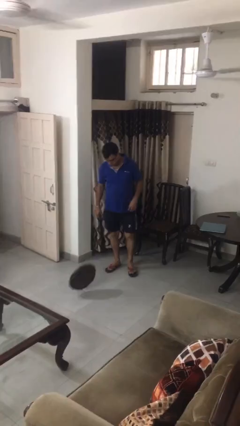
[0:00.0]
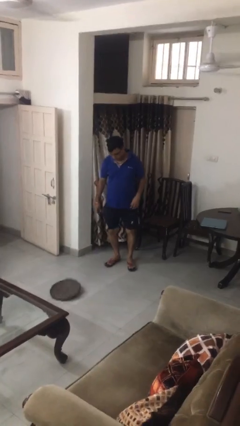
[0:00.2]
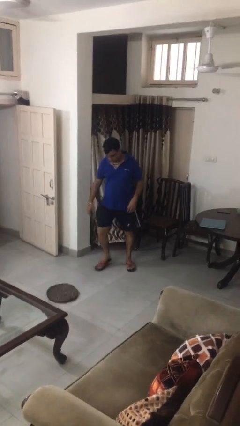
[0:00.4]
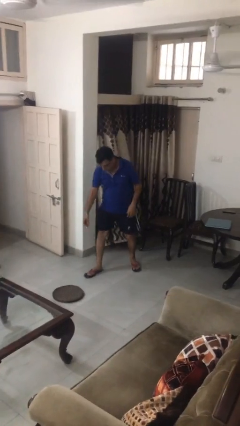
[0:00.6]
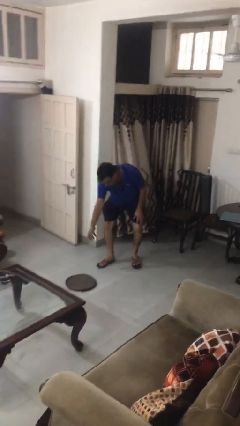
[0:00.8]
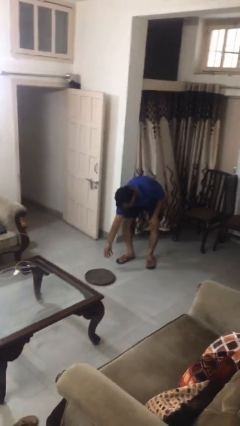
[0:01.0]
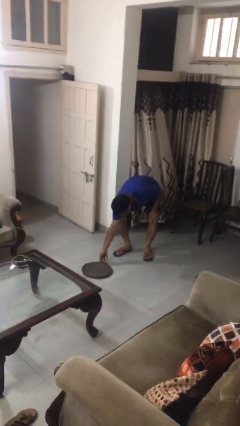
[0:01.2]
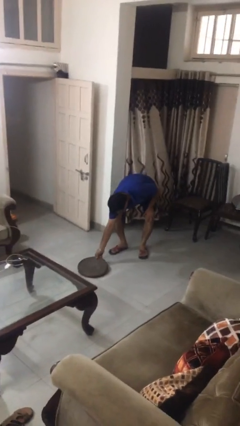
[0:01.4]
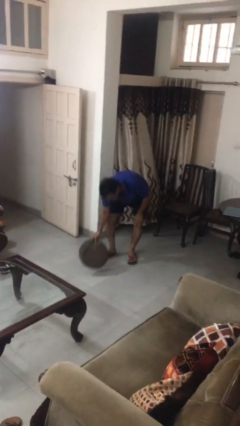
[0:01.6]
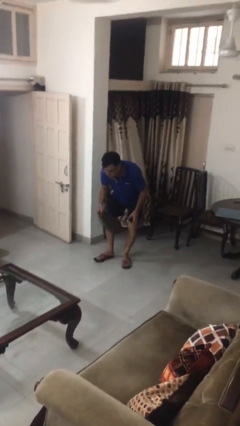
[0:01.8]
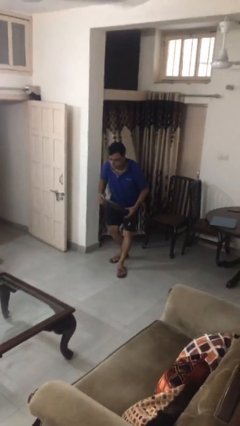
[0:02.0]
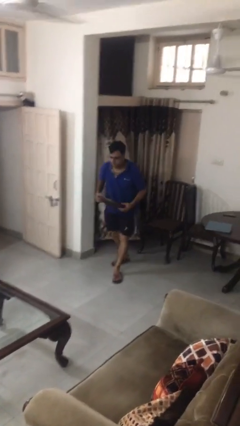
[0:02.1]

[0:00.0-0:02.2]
person picks up object from floor

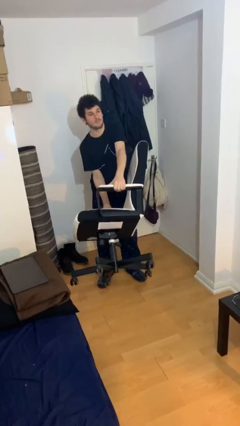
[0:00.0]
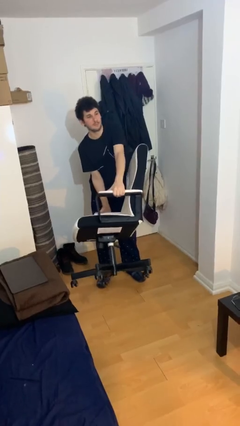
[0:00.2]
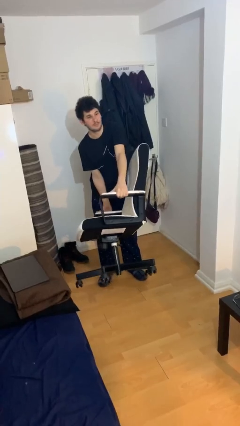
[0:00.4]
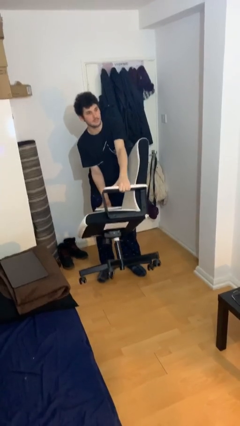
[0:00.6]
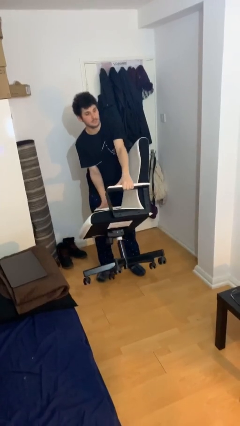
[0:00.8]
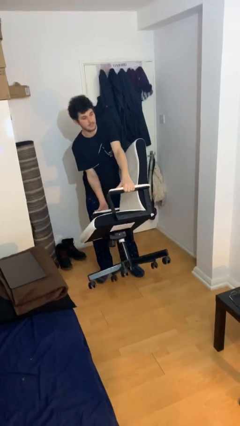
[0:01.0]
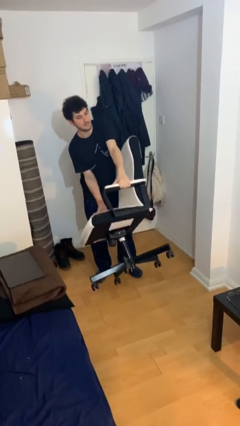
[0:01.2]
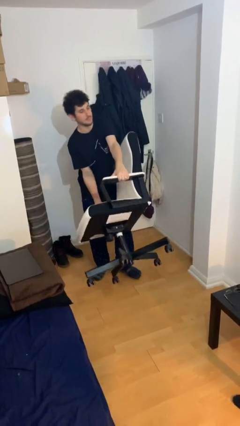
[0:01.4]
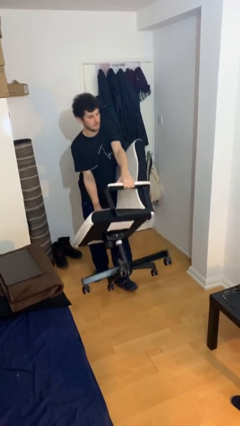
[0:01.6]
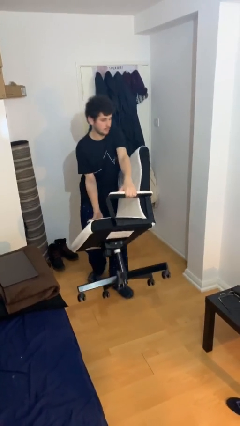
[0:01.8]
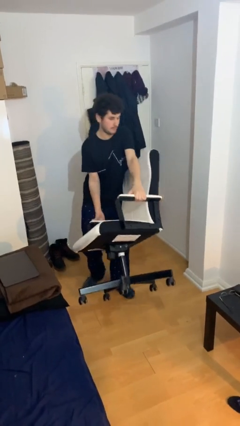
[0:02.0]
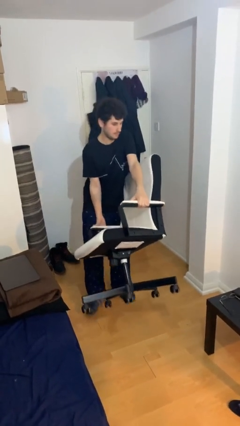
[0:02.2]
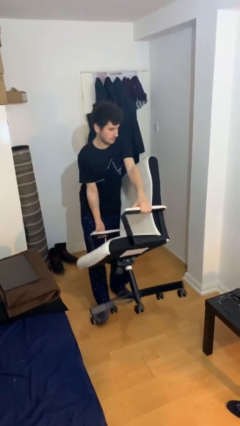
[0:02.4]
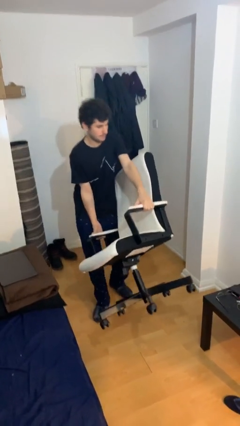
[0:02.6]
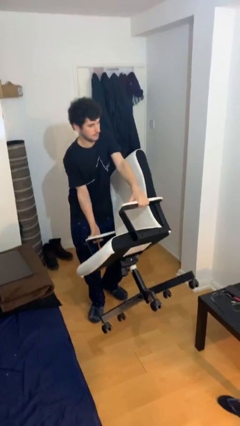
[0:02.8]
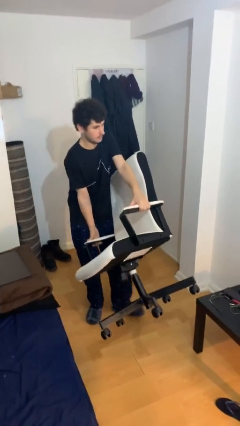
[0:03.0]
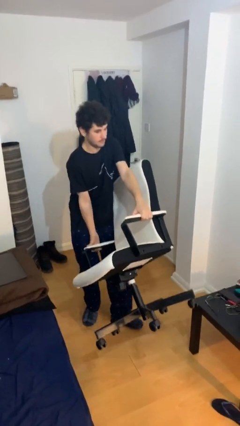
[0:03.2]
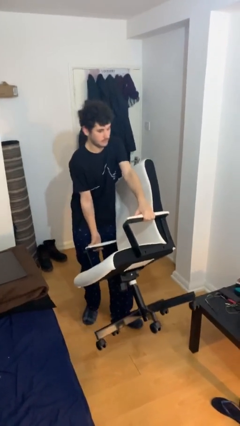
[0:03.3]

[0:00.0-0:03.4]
person carries heavy object

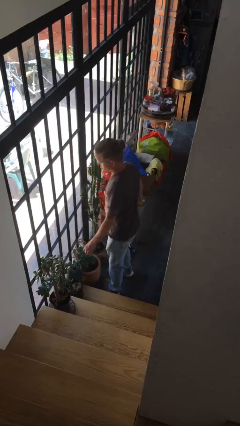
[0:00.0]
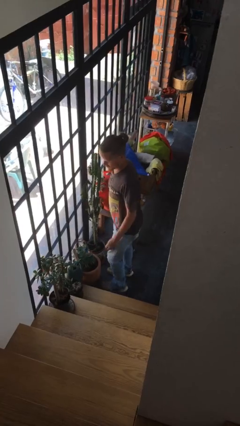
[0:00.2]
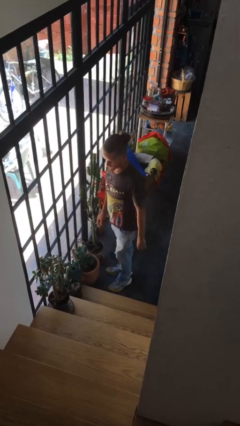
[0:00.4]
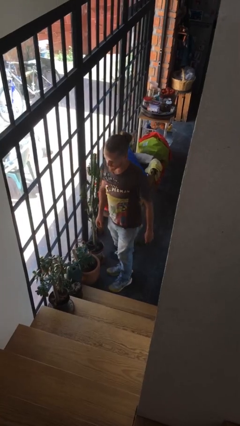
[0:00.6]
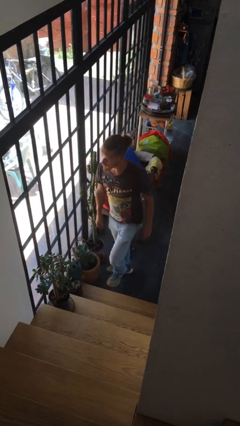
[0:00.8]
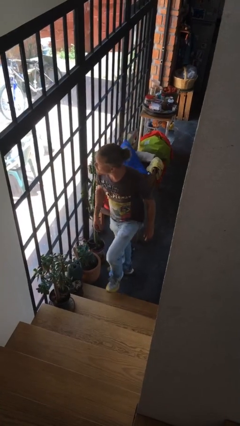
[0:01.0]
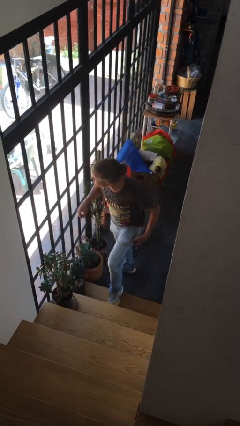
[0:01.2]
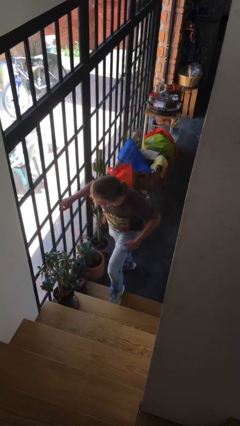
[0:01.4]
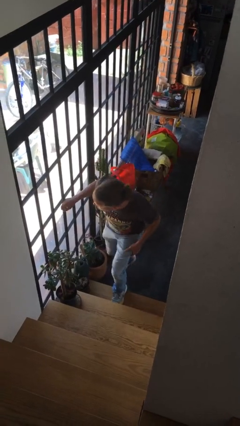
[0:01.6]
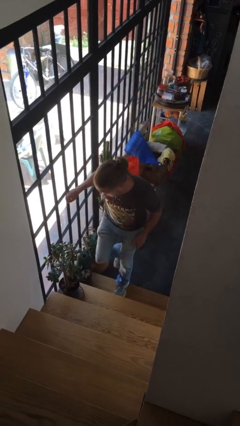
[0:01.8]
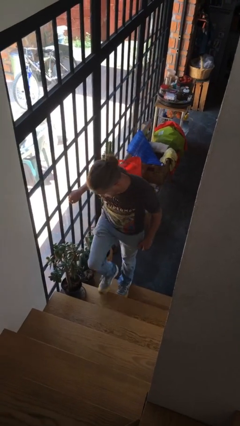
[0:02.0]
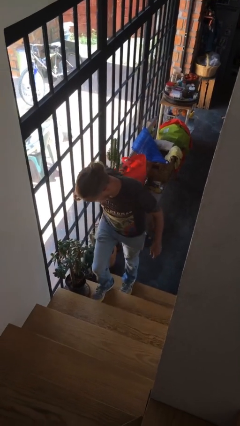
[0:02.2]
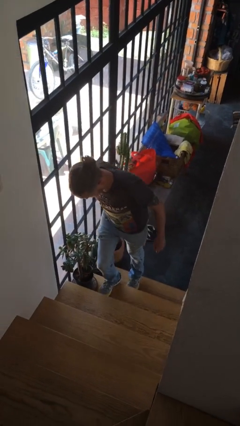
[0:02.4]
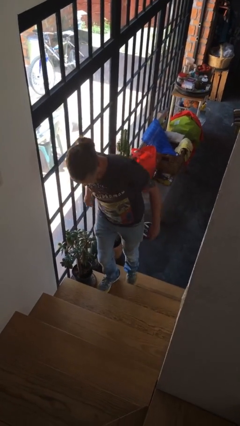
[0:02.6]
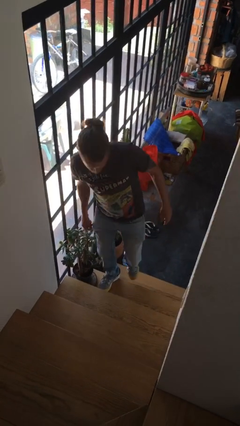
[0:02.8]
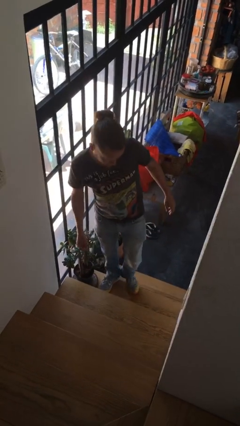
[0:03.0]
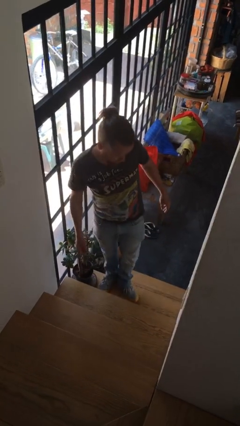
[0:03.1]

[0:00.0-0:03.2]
person climbs up stairs

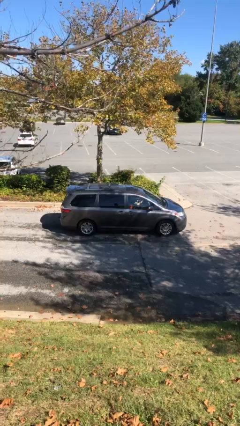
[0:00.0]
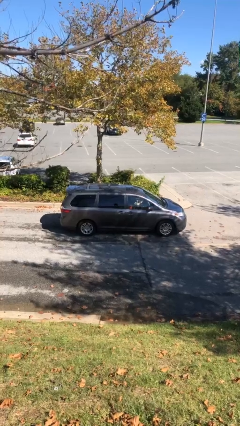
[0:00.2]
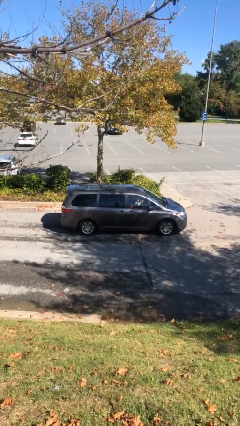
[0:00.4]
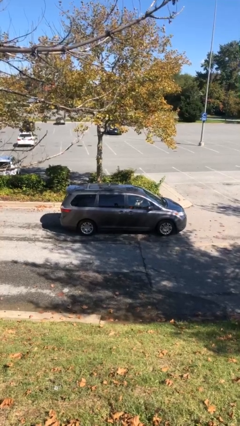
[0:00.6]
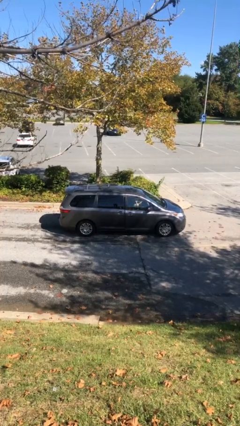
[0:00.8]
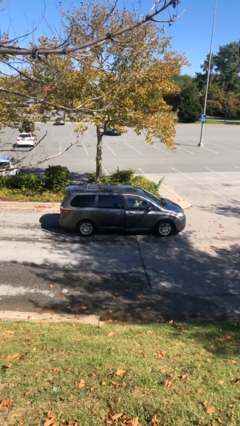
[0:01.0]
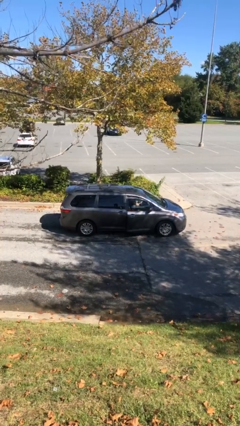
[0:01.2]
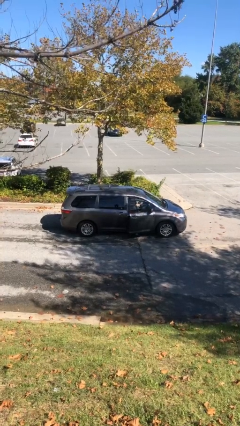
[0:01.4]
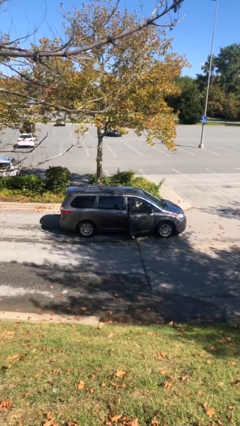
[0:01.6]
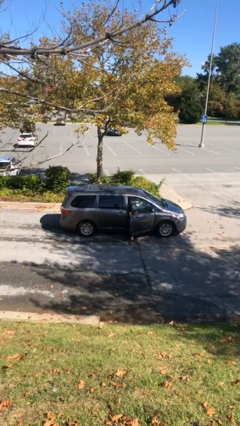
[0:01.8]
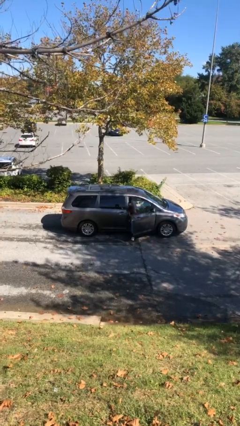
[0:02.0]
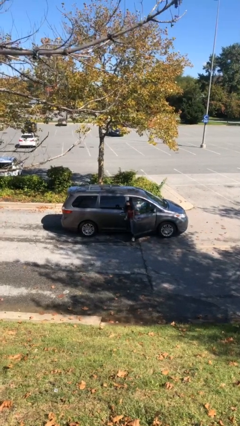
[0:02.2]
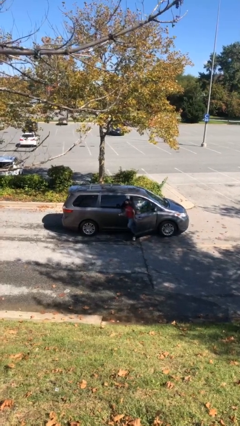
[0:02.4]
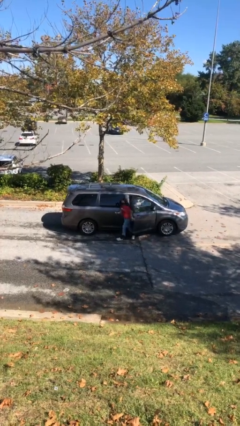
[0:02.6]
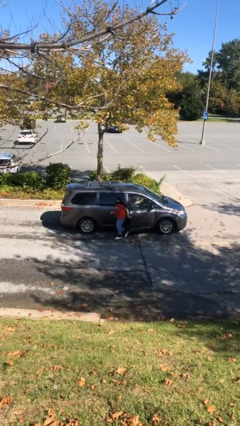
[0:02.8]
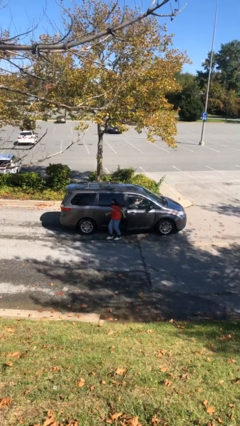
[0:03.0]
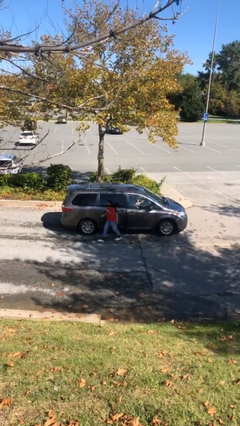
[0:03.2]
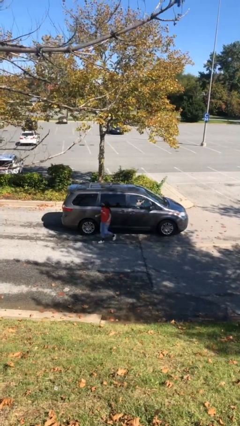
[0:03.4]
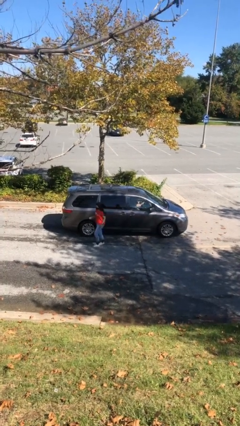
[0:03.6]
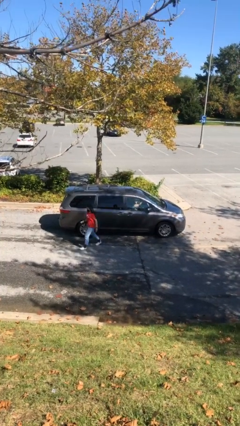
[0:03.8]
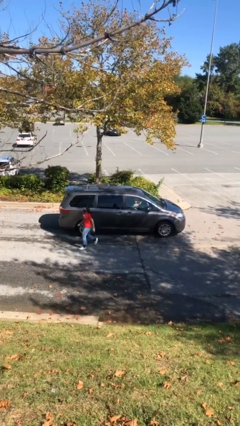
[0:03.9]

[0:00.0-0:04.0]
car drops off person

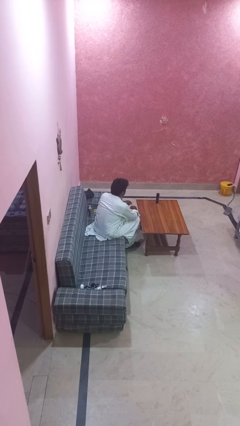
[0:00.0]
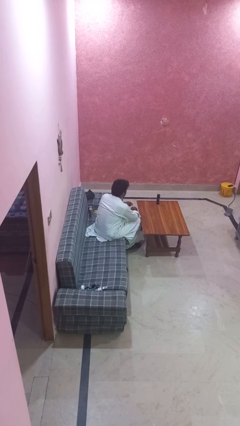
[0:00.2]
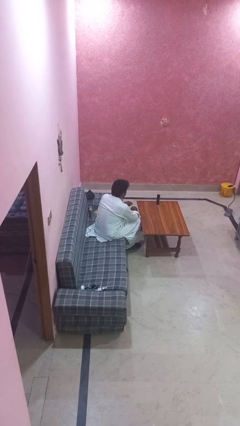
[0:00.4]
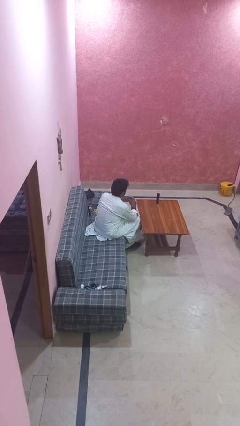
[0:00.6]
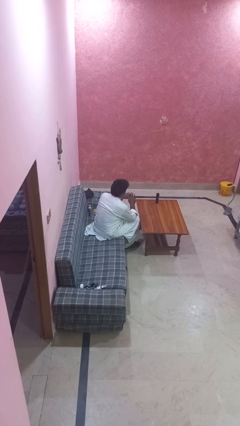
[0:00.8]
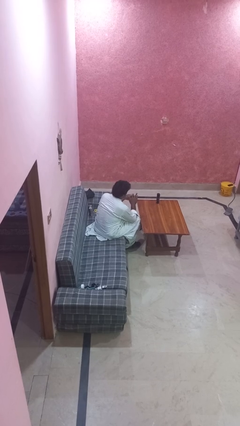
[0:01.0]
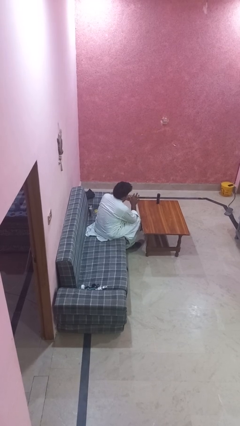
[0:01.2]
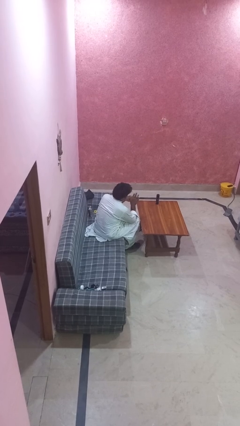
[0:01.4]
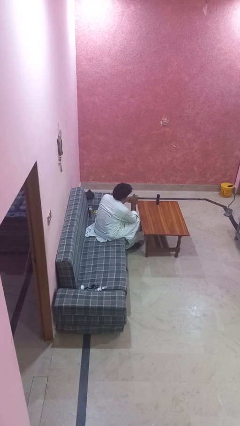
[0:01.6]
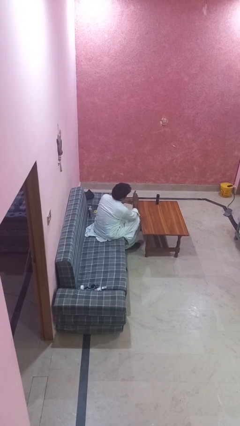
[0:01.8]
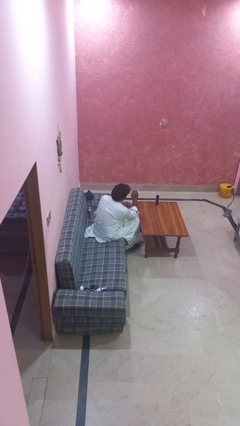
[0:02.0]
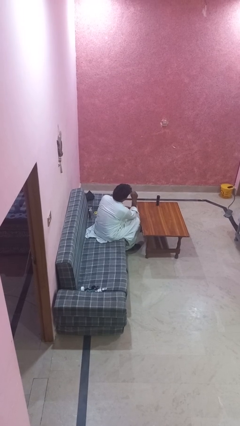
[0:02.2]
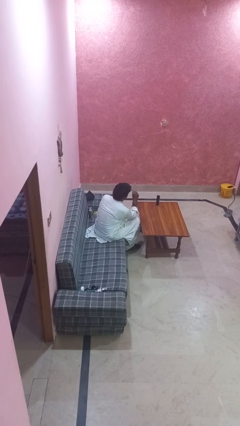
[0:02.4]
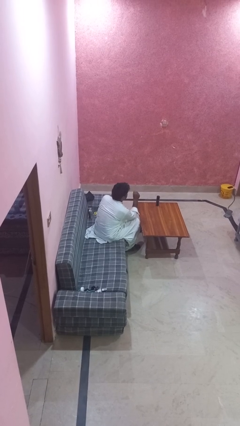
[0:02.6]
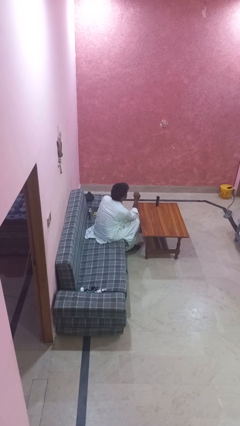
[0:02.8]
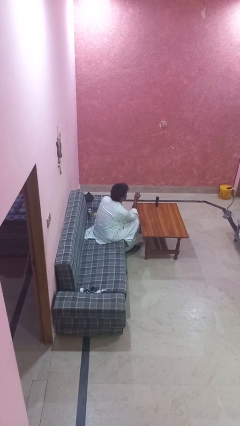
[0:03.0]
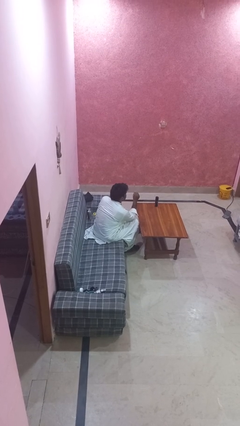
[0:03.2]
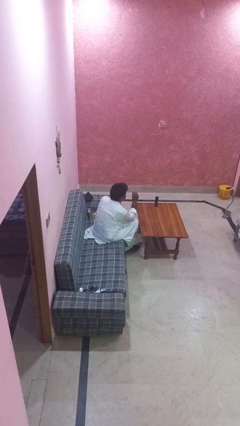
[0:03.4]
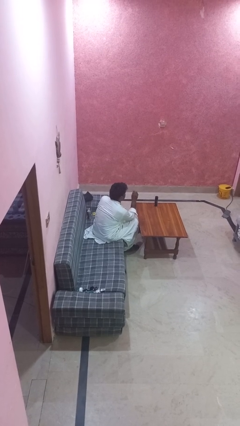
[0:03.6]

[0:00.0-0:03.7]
person puts on ring

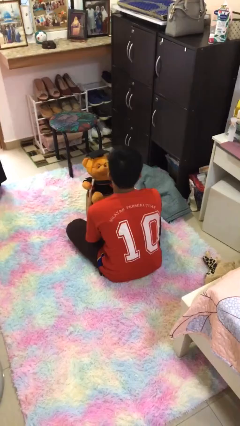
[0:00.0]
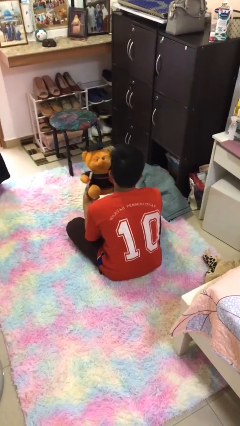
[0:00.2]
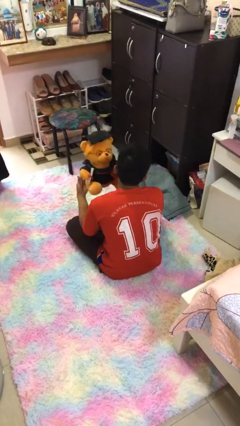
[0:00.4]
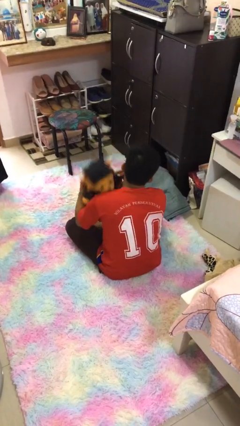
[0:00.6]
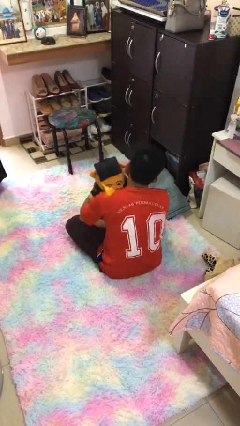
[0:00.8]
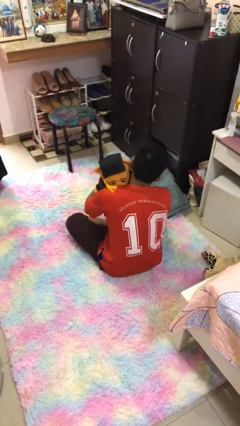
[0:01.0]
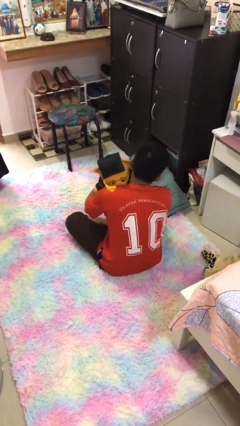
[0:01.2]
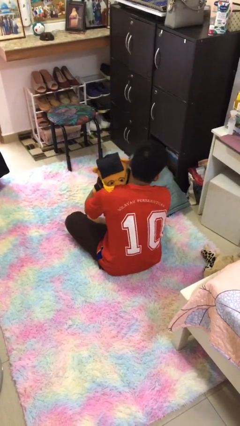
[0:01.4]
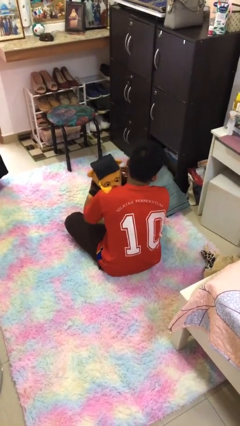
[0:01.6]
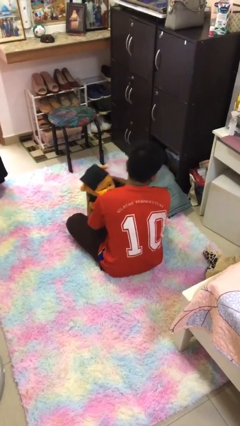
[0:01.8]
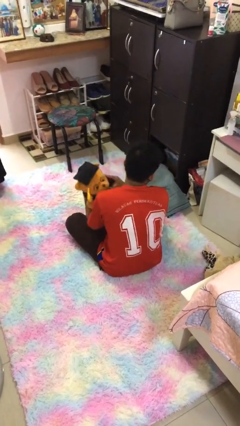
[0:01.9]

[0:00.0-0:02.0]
person hugs stuffed animal
